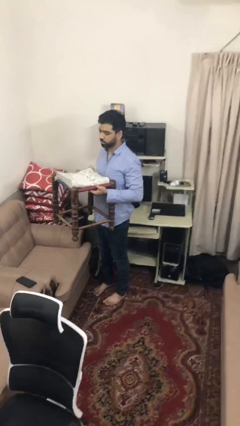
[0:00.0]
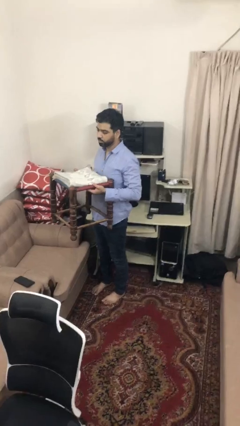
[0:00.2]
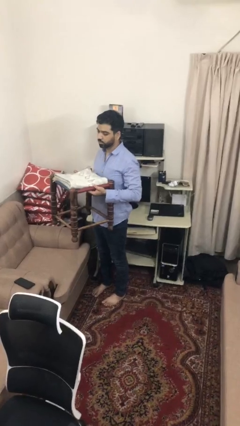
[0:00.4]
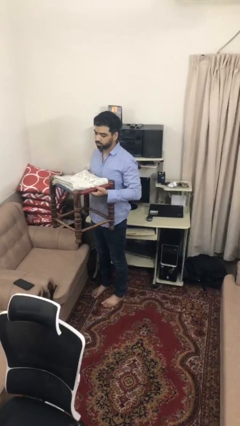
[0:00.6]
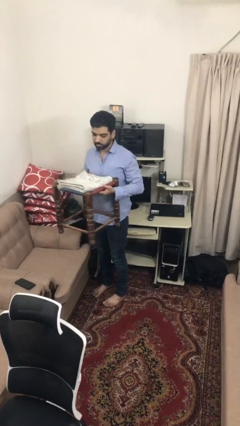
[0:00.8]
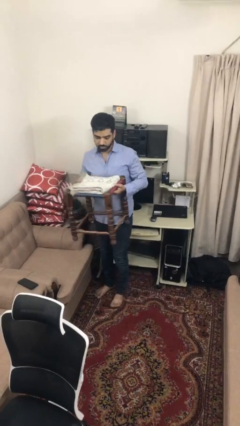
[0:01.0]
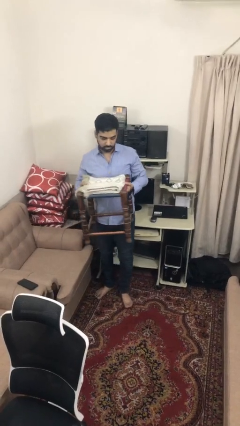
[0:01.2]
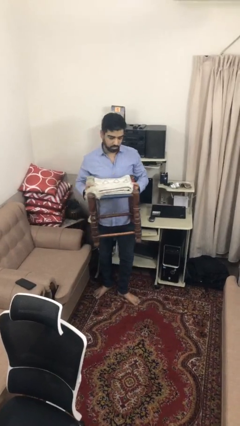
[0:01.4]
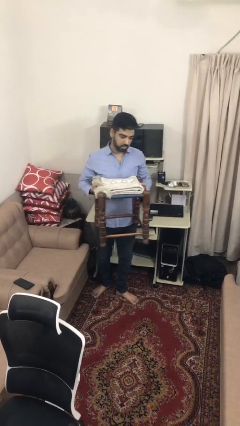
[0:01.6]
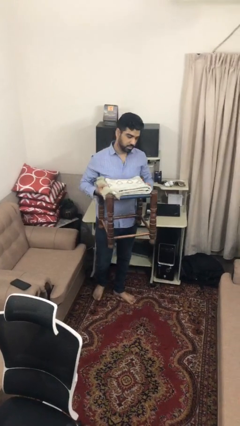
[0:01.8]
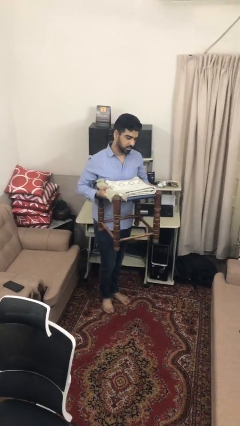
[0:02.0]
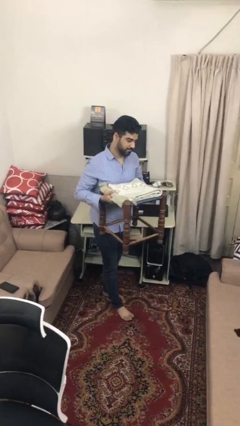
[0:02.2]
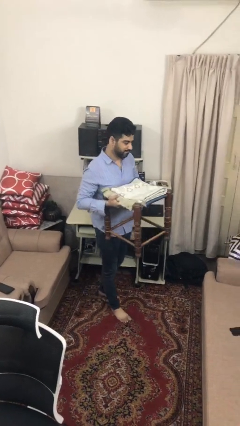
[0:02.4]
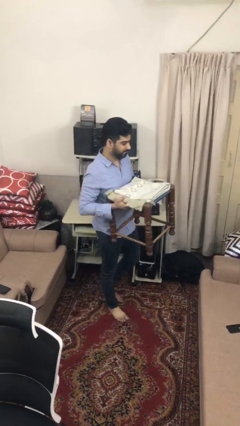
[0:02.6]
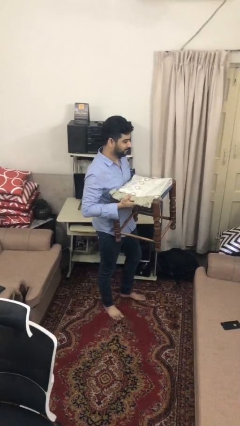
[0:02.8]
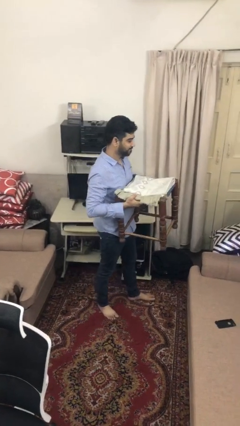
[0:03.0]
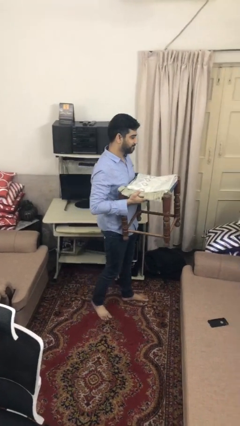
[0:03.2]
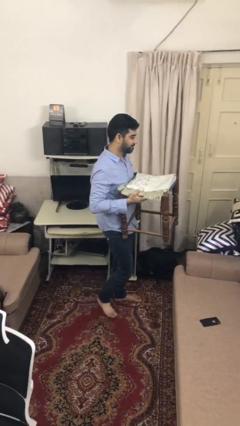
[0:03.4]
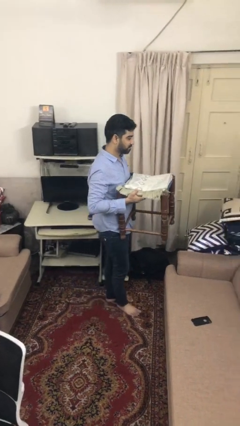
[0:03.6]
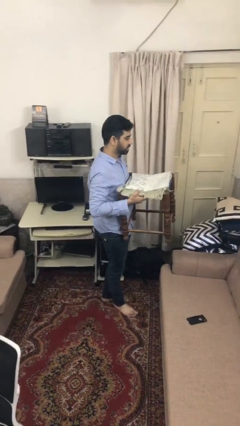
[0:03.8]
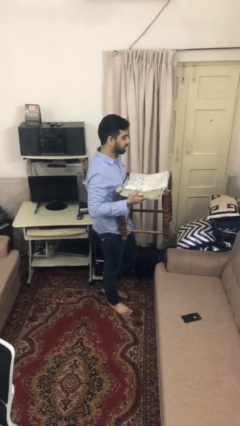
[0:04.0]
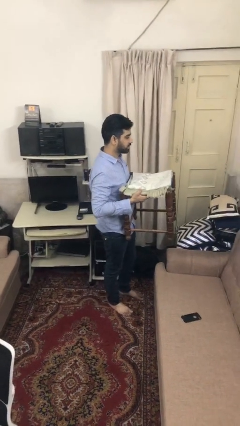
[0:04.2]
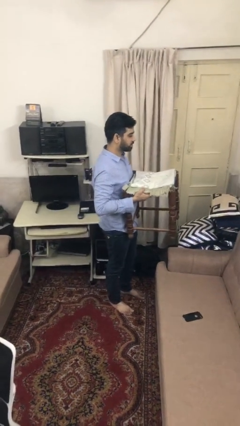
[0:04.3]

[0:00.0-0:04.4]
person carries furniture

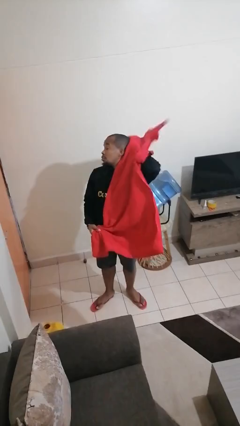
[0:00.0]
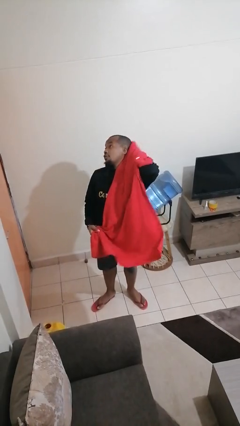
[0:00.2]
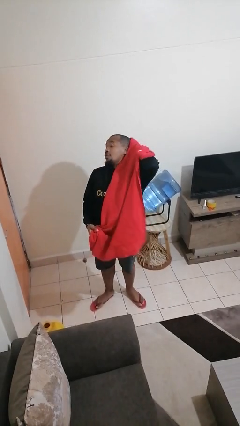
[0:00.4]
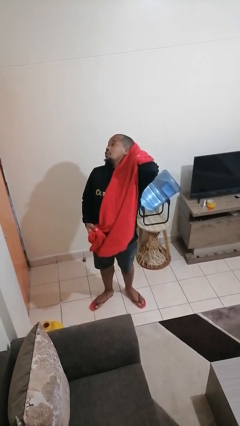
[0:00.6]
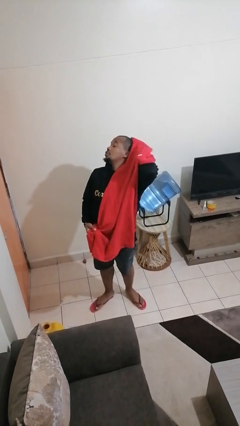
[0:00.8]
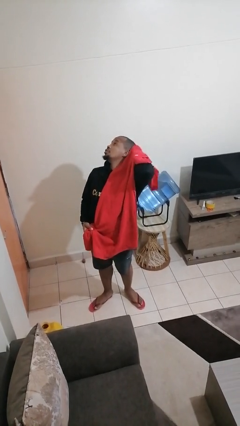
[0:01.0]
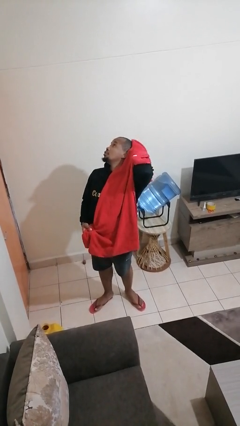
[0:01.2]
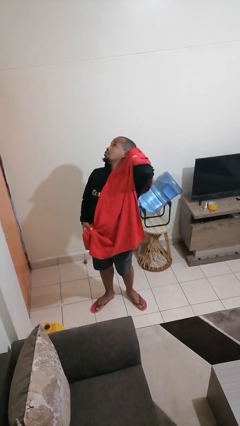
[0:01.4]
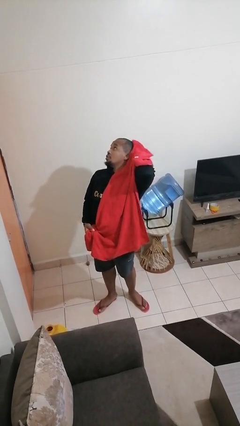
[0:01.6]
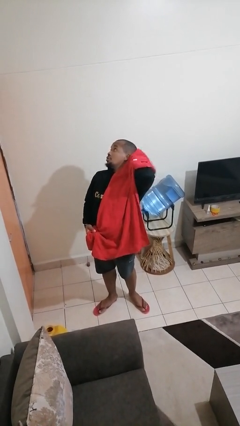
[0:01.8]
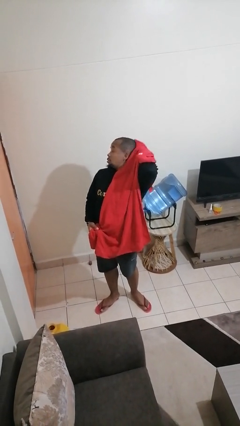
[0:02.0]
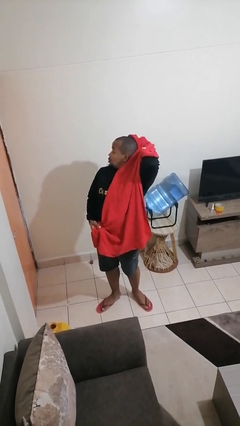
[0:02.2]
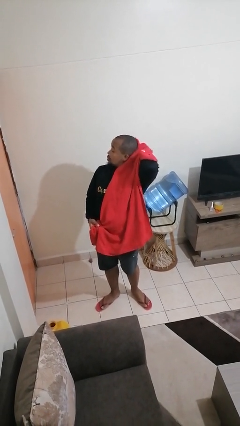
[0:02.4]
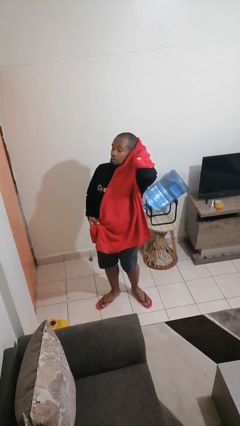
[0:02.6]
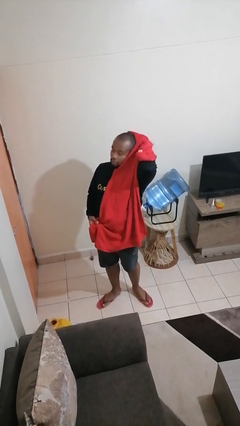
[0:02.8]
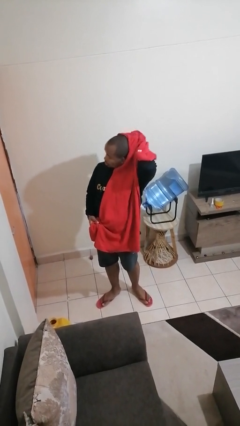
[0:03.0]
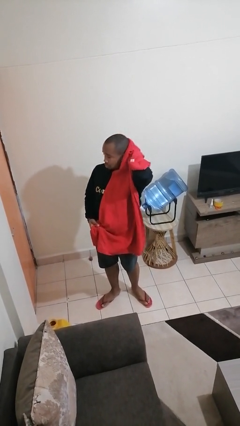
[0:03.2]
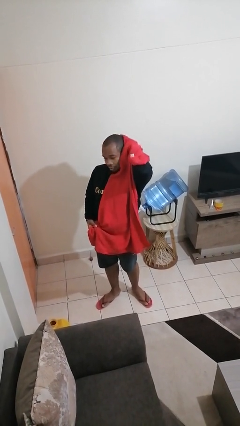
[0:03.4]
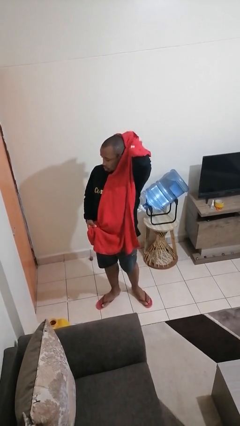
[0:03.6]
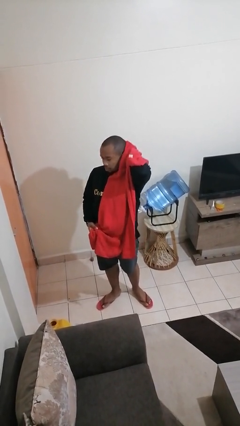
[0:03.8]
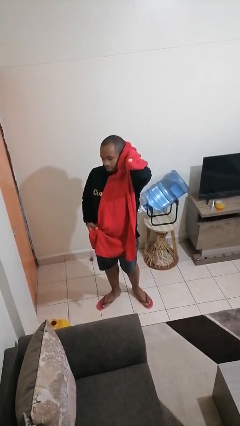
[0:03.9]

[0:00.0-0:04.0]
person dries hair with towel

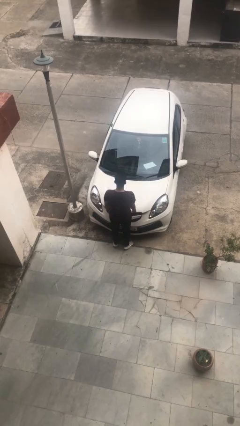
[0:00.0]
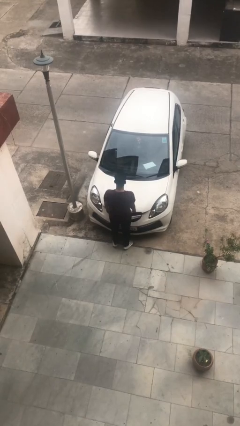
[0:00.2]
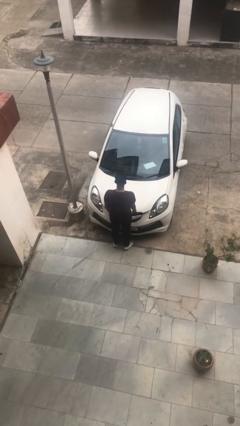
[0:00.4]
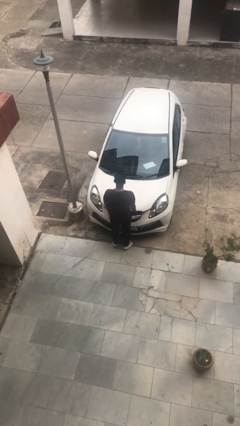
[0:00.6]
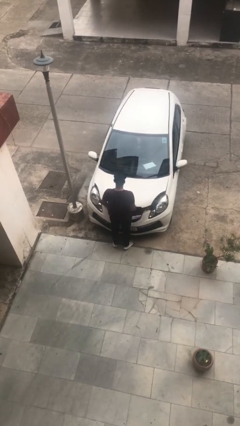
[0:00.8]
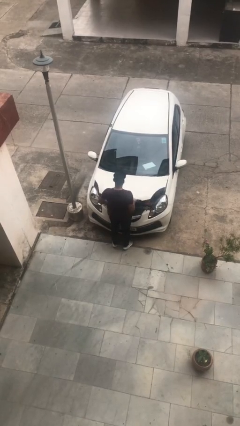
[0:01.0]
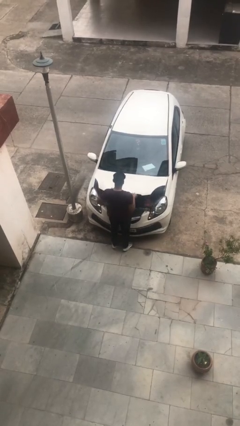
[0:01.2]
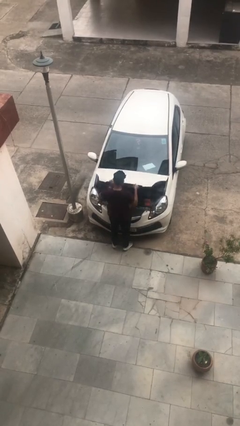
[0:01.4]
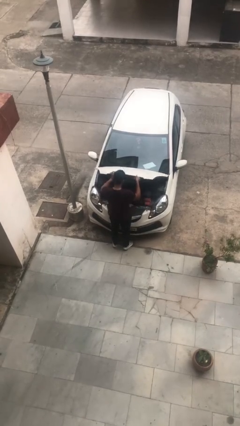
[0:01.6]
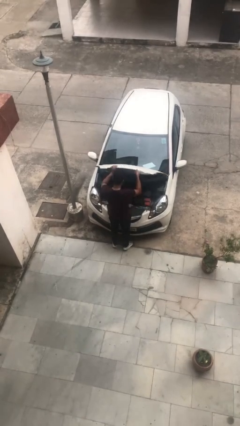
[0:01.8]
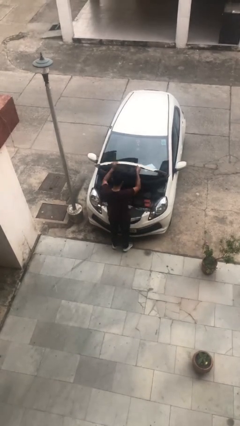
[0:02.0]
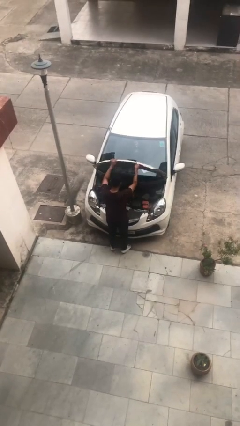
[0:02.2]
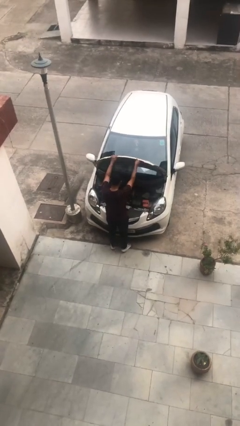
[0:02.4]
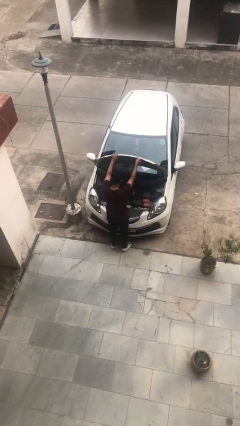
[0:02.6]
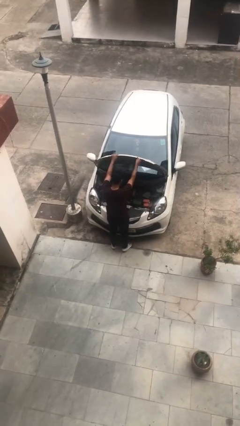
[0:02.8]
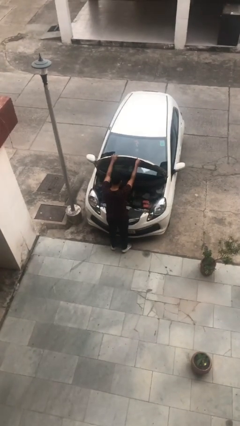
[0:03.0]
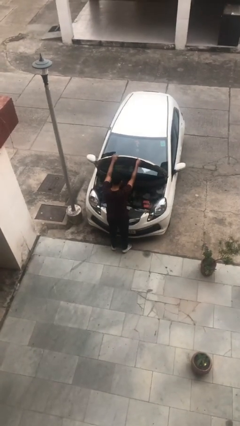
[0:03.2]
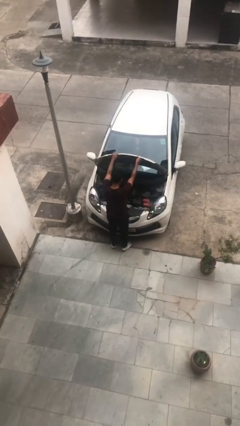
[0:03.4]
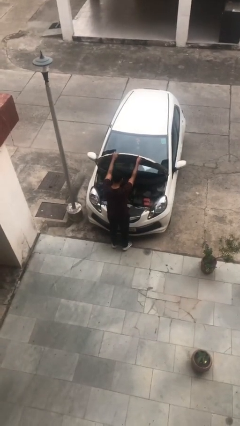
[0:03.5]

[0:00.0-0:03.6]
person opens car hood

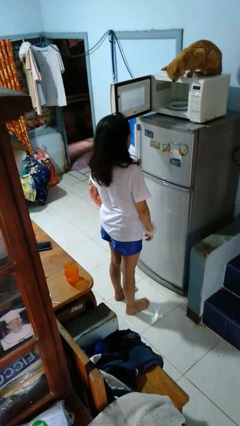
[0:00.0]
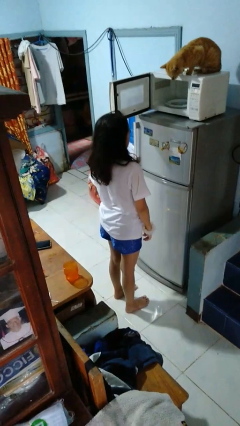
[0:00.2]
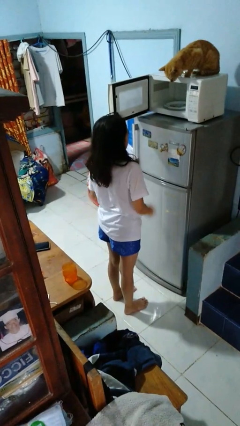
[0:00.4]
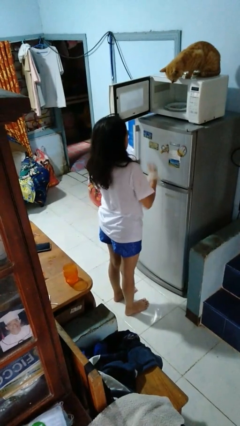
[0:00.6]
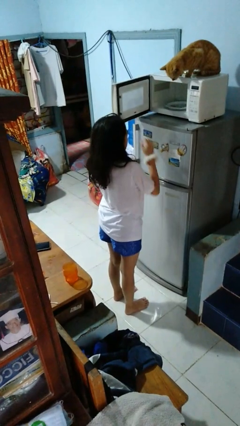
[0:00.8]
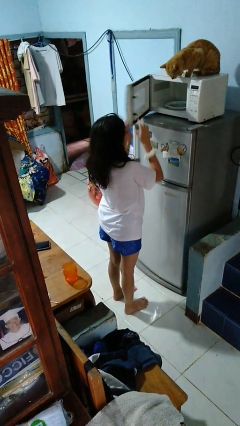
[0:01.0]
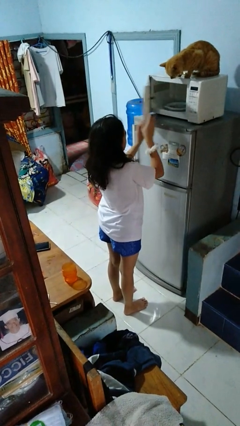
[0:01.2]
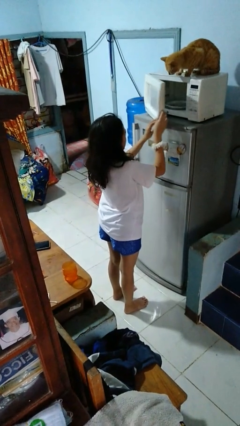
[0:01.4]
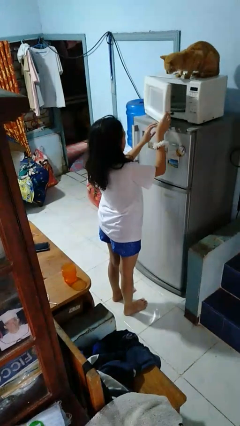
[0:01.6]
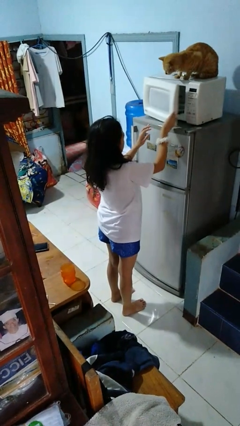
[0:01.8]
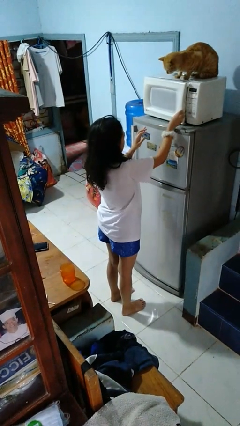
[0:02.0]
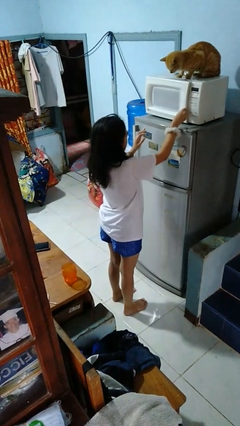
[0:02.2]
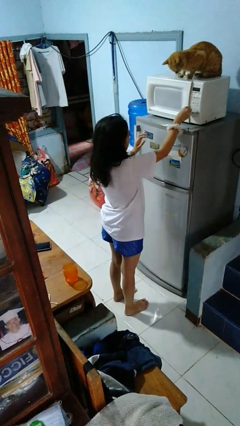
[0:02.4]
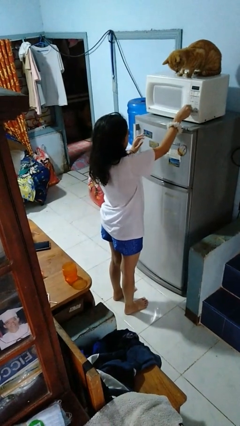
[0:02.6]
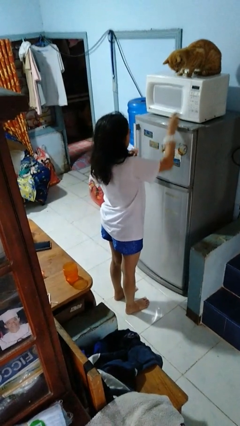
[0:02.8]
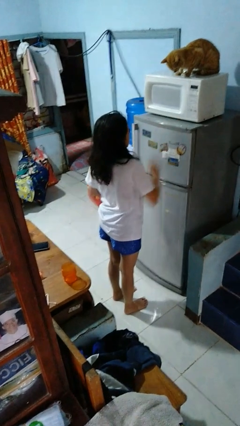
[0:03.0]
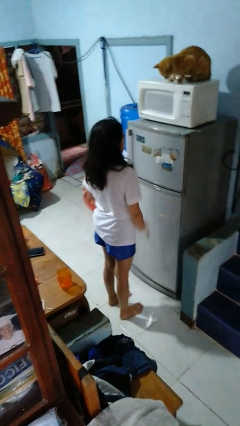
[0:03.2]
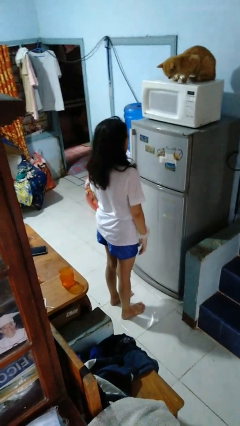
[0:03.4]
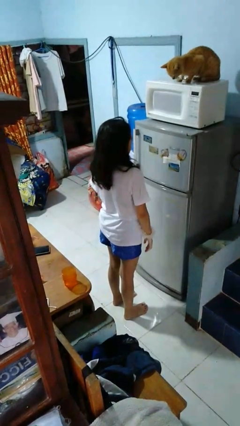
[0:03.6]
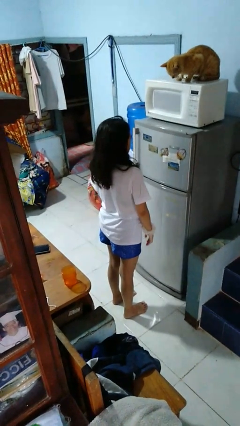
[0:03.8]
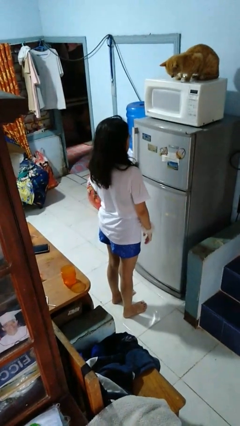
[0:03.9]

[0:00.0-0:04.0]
person closes microwave

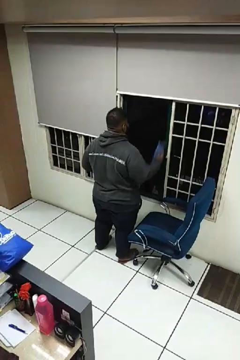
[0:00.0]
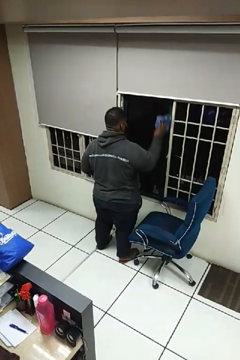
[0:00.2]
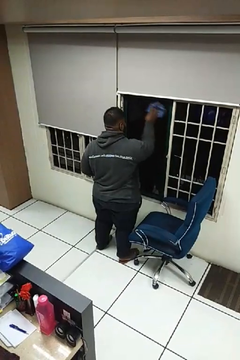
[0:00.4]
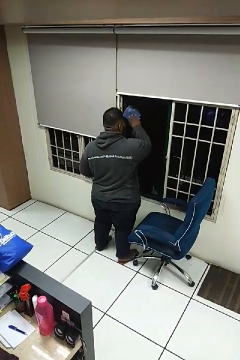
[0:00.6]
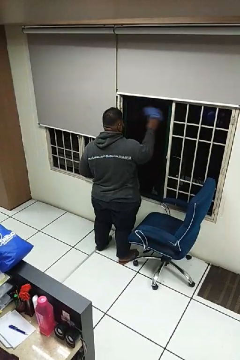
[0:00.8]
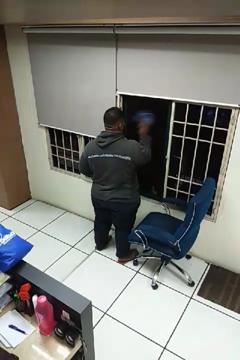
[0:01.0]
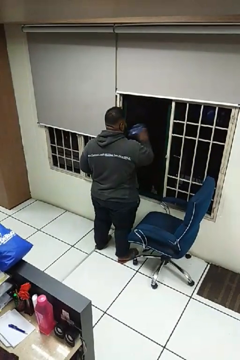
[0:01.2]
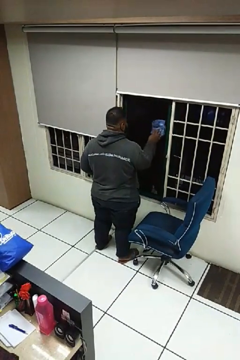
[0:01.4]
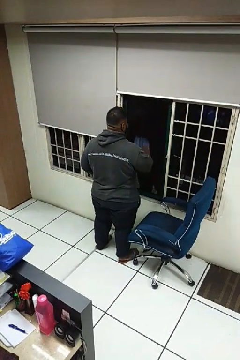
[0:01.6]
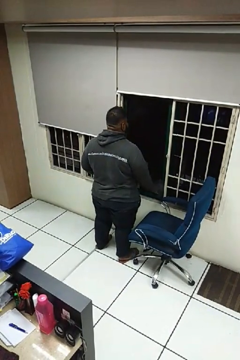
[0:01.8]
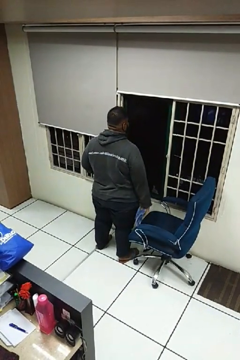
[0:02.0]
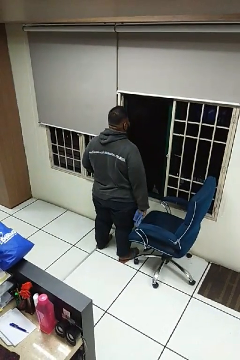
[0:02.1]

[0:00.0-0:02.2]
person washes window
